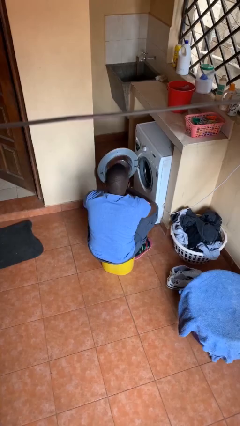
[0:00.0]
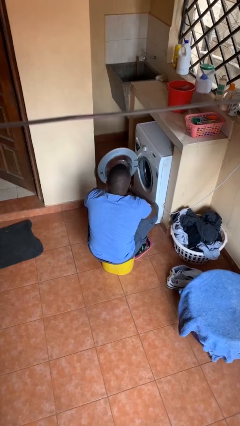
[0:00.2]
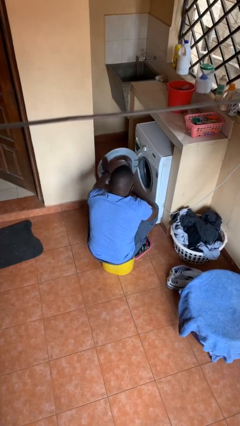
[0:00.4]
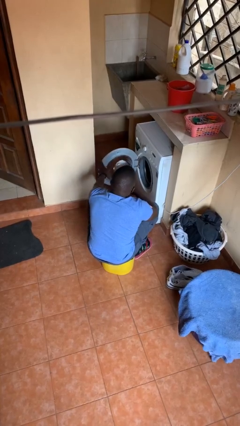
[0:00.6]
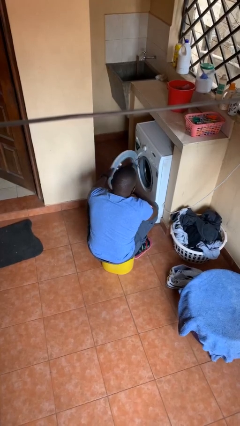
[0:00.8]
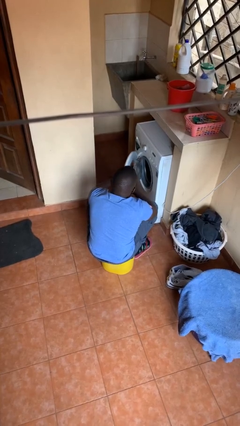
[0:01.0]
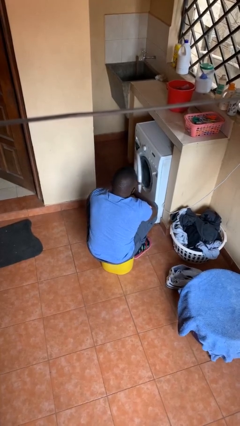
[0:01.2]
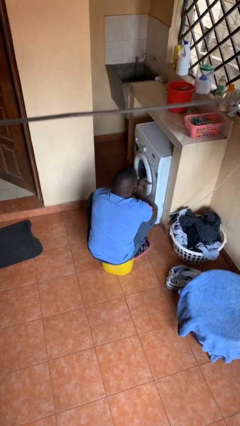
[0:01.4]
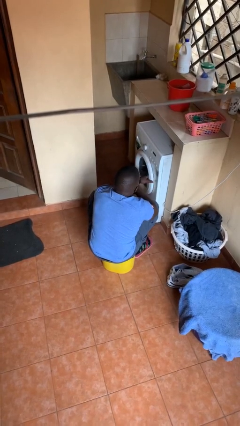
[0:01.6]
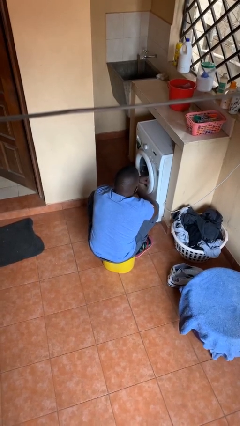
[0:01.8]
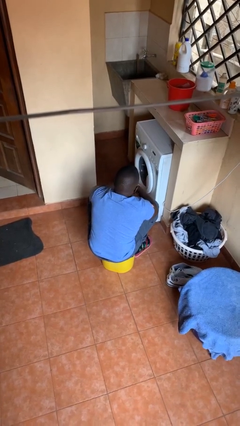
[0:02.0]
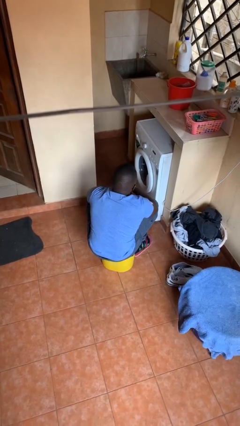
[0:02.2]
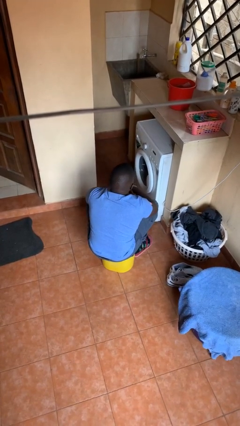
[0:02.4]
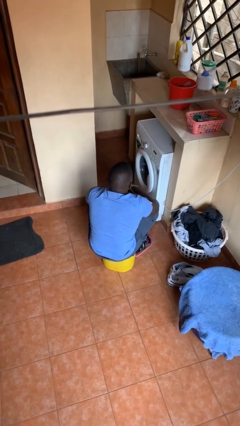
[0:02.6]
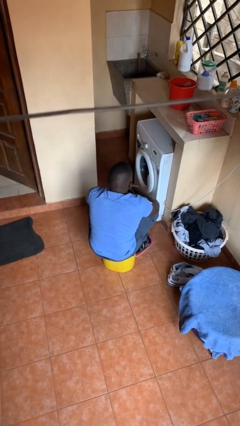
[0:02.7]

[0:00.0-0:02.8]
person closes clothes washer

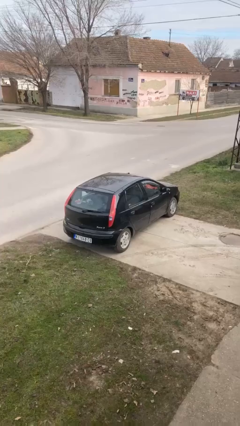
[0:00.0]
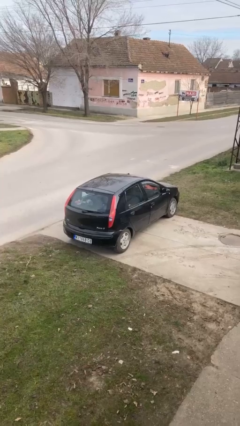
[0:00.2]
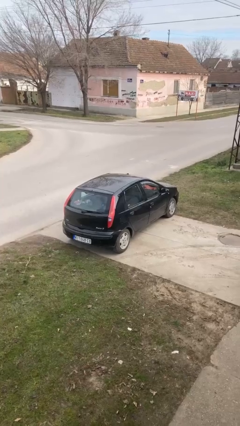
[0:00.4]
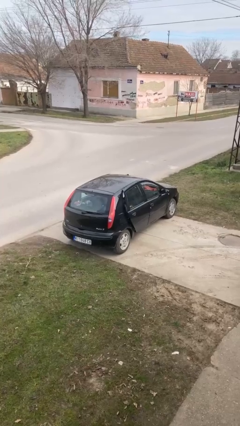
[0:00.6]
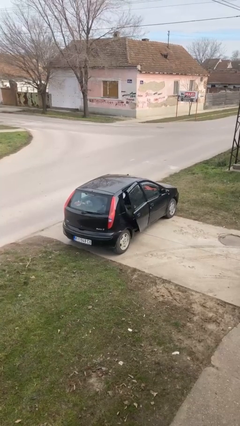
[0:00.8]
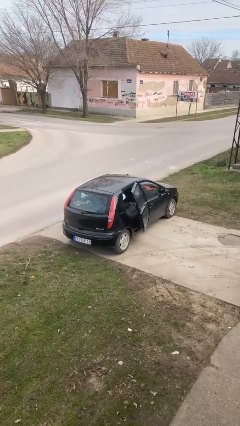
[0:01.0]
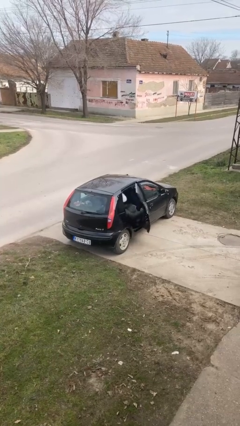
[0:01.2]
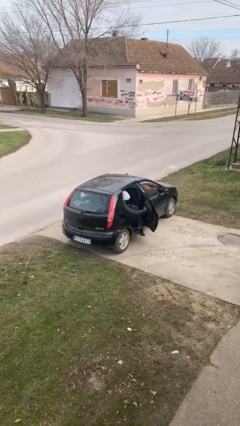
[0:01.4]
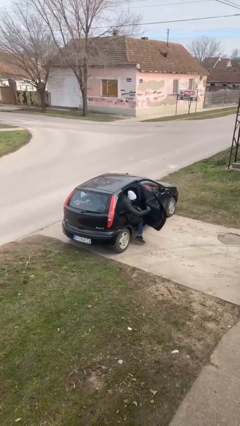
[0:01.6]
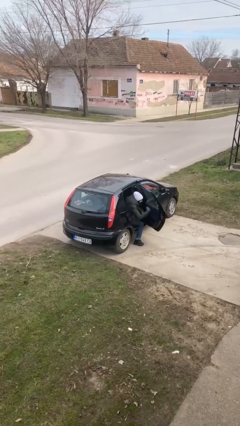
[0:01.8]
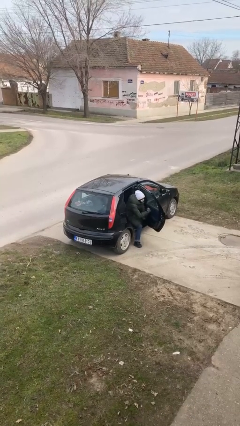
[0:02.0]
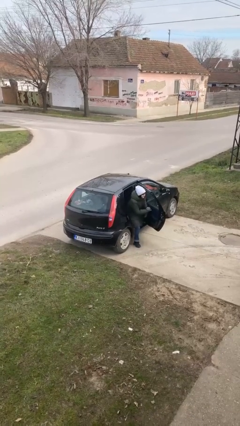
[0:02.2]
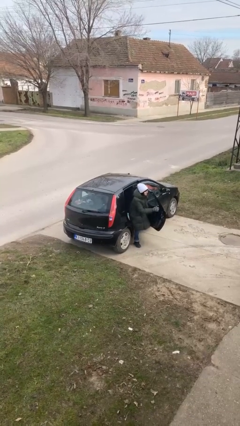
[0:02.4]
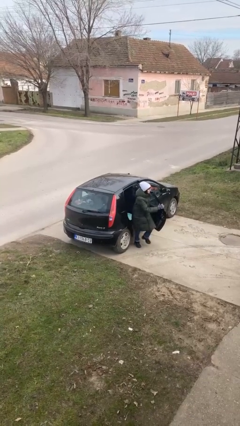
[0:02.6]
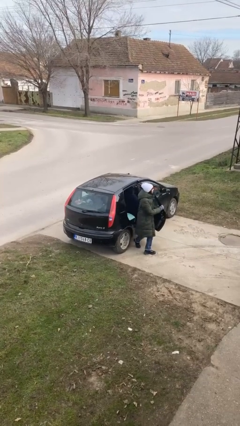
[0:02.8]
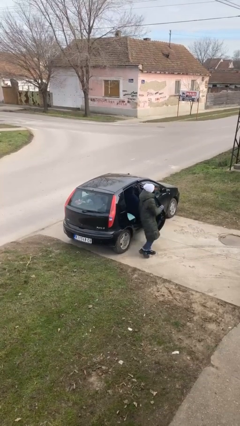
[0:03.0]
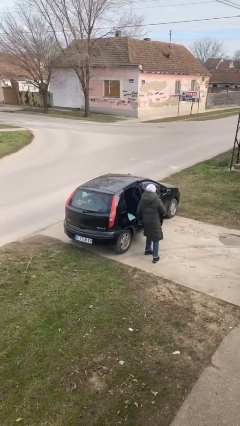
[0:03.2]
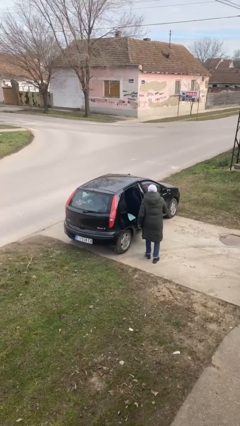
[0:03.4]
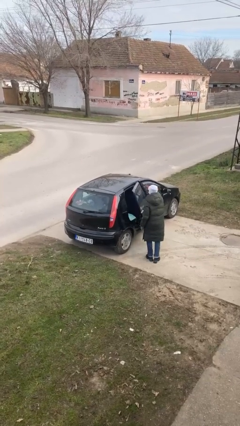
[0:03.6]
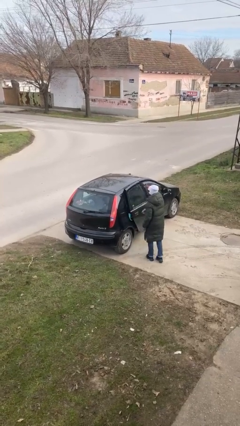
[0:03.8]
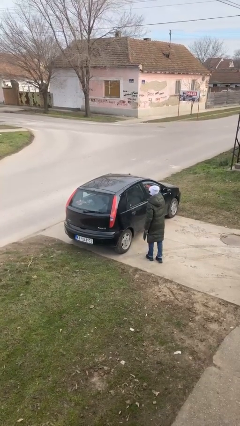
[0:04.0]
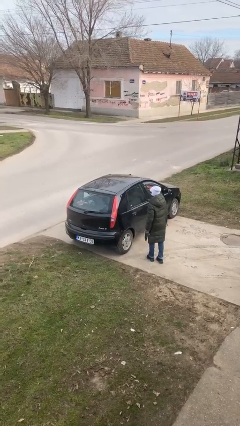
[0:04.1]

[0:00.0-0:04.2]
car drops off person

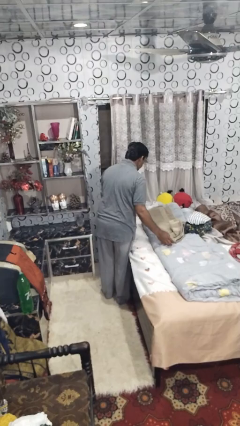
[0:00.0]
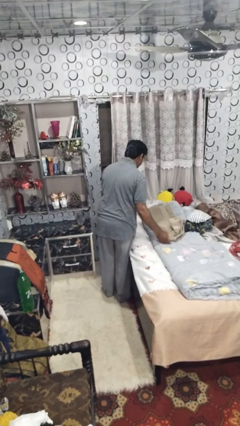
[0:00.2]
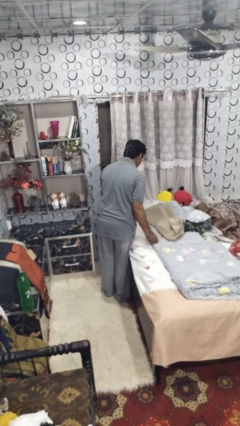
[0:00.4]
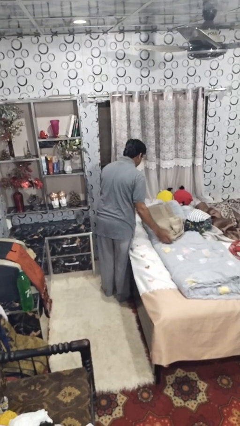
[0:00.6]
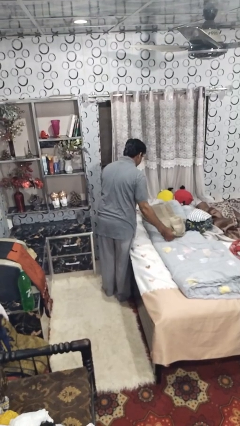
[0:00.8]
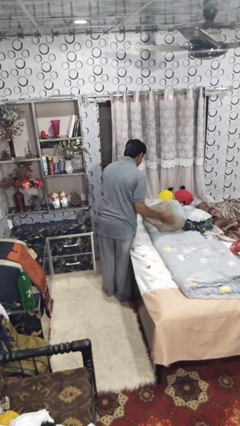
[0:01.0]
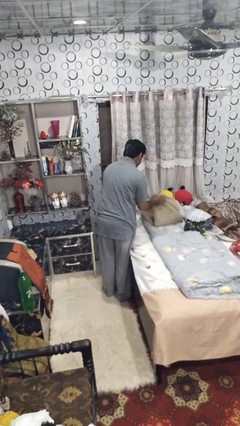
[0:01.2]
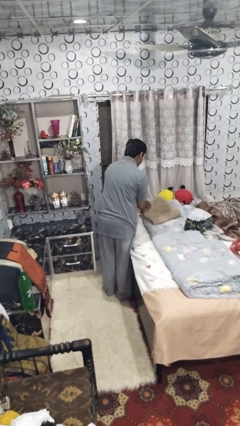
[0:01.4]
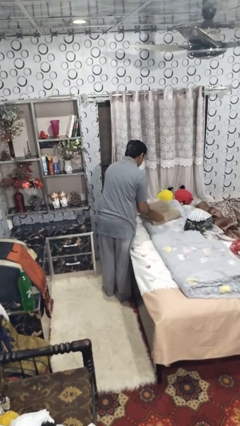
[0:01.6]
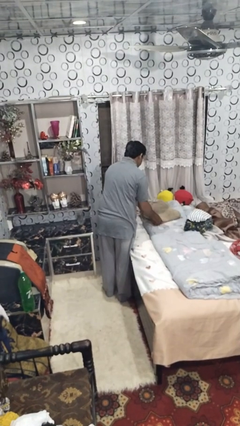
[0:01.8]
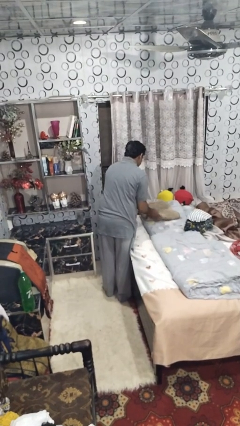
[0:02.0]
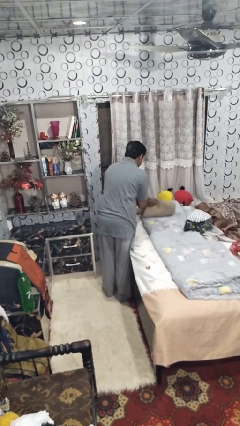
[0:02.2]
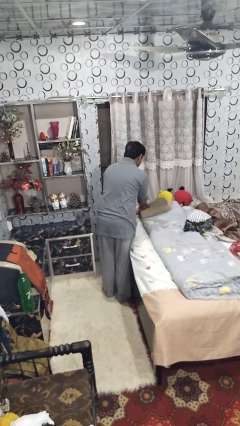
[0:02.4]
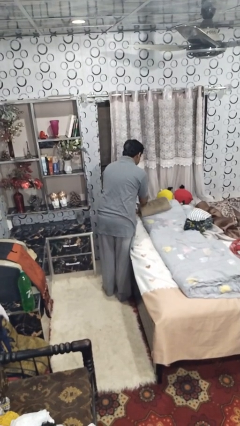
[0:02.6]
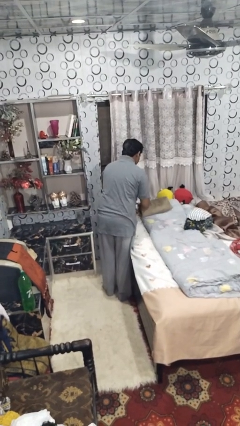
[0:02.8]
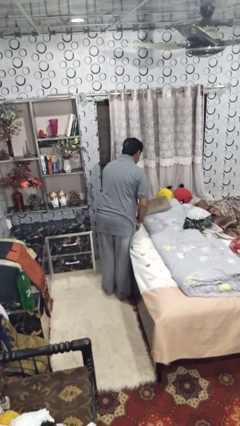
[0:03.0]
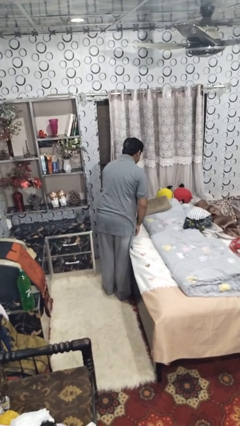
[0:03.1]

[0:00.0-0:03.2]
person folds towel

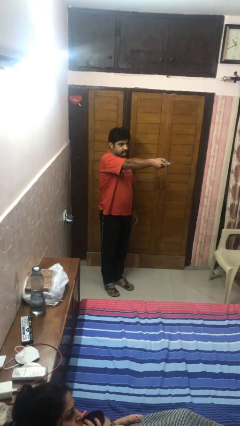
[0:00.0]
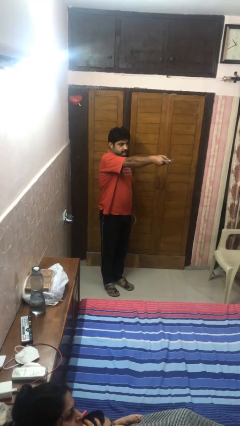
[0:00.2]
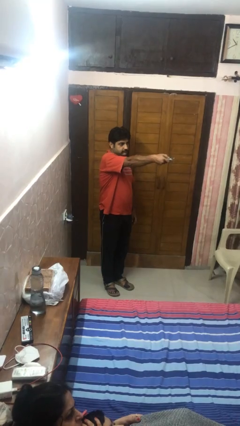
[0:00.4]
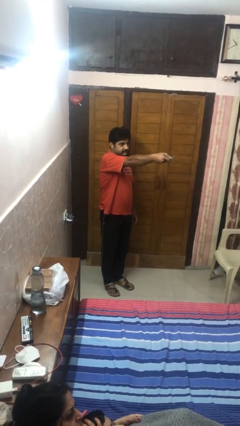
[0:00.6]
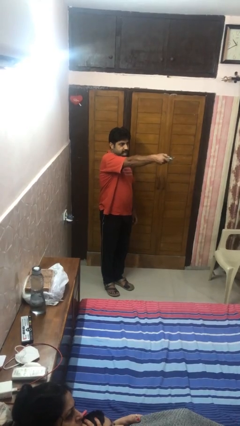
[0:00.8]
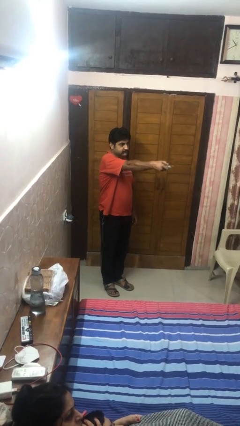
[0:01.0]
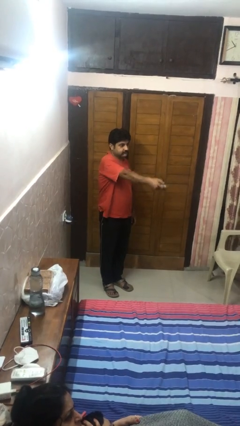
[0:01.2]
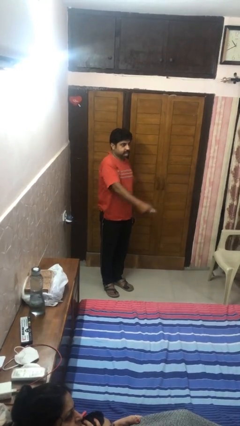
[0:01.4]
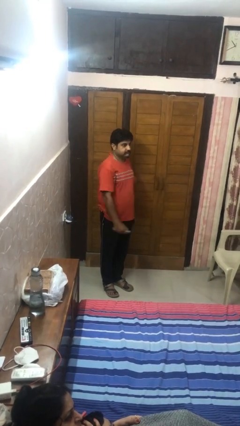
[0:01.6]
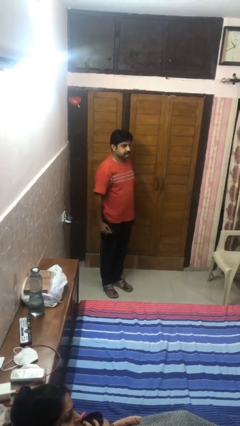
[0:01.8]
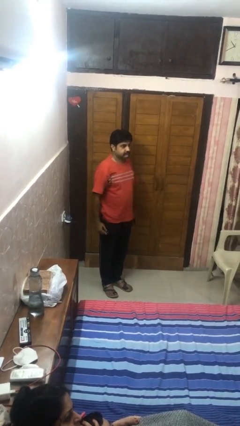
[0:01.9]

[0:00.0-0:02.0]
person uses television remote

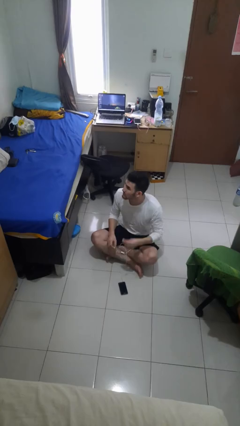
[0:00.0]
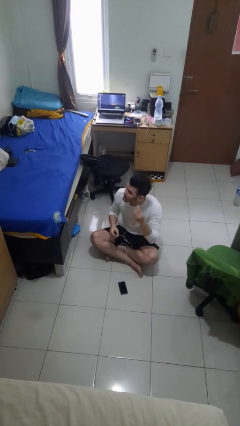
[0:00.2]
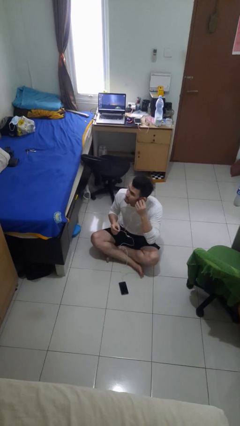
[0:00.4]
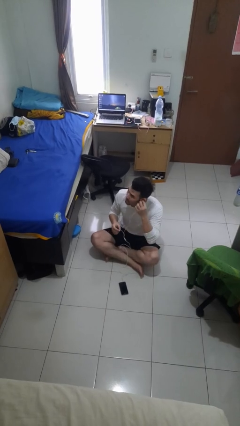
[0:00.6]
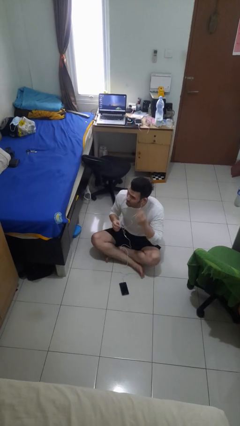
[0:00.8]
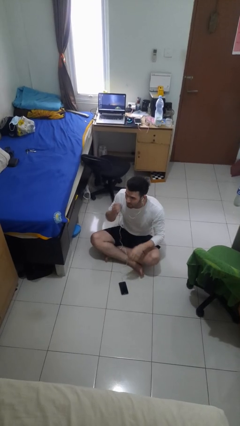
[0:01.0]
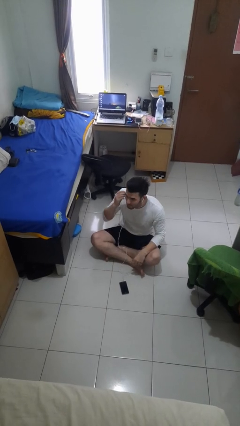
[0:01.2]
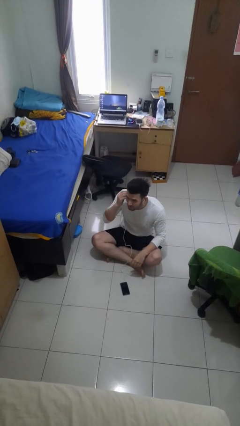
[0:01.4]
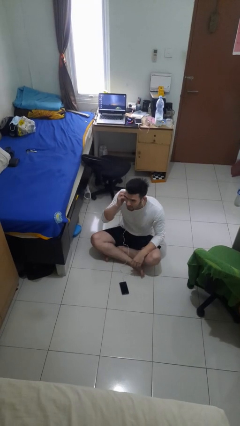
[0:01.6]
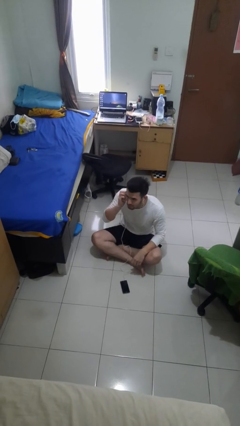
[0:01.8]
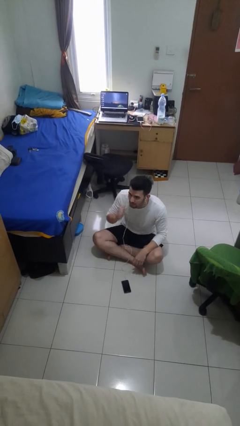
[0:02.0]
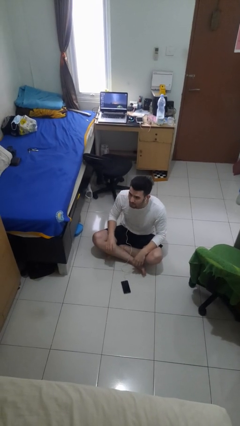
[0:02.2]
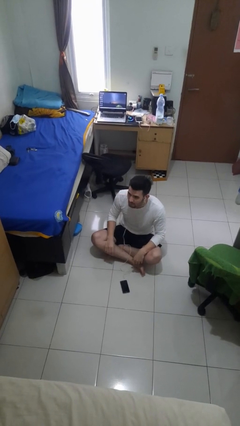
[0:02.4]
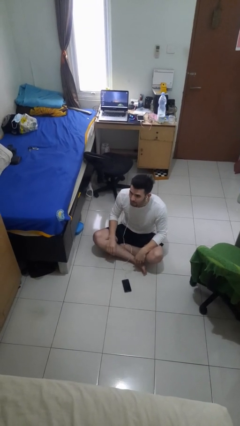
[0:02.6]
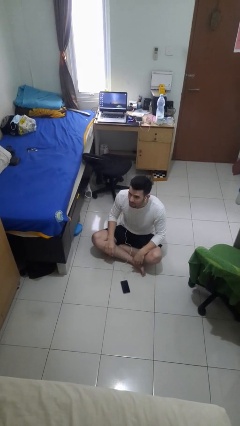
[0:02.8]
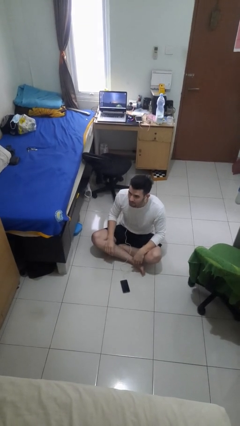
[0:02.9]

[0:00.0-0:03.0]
person puts on headphones

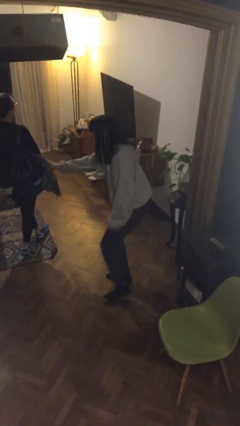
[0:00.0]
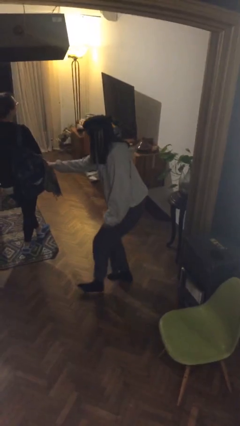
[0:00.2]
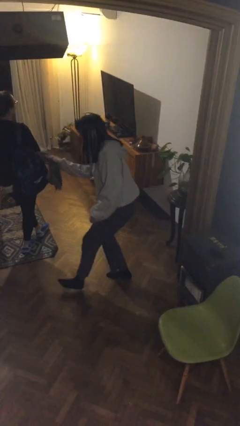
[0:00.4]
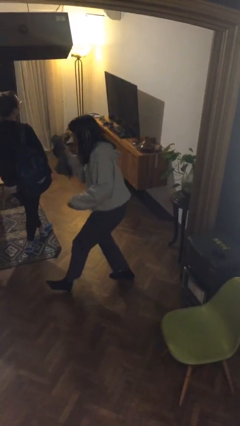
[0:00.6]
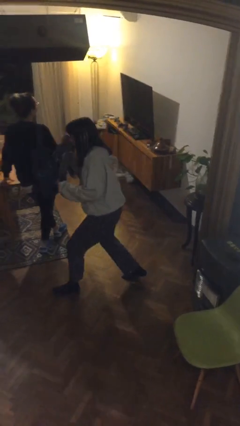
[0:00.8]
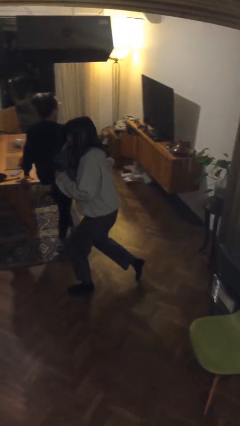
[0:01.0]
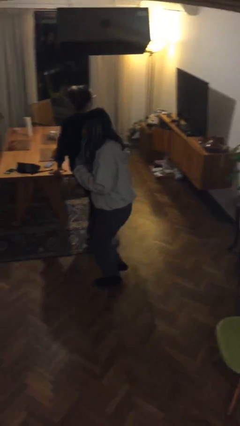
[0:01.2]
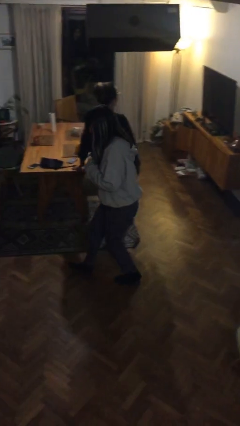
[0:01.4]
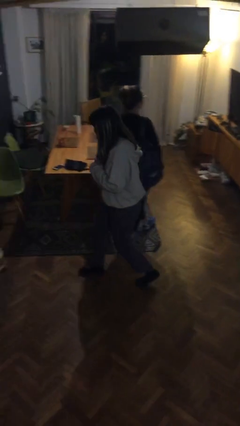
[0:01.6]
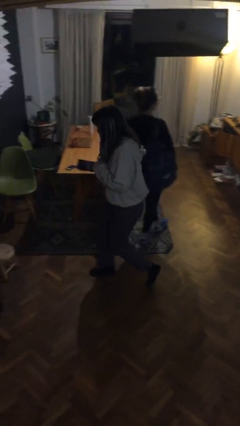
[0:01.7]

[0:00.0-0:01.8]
person steals object from person

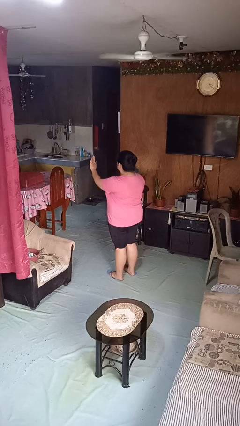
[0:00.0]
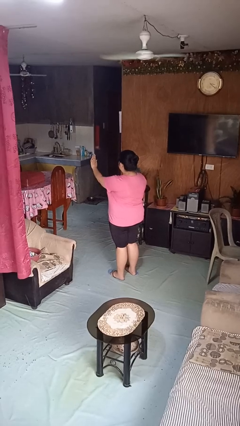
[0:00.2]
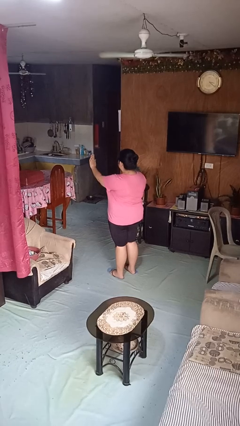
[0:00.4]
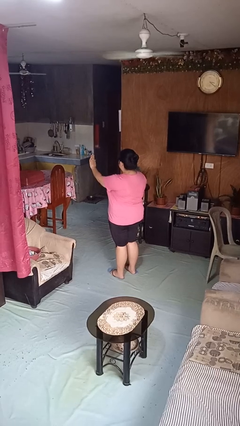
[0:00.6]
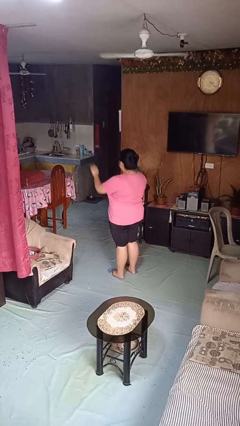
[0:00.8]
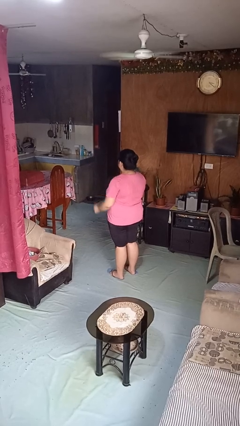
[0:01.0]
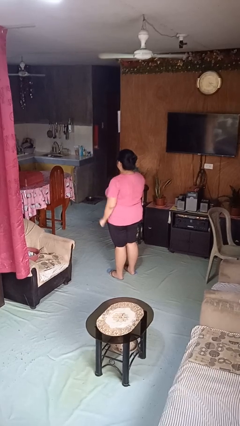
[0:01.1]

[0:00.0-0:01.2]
person gestures stop
